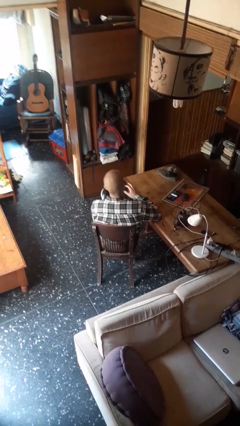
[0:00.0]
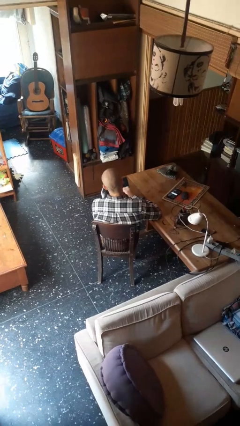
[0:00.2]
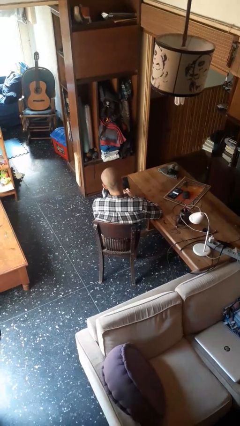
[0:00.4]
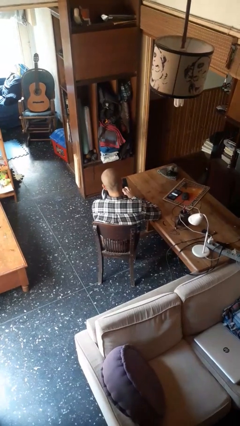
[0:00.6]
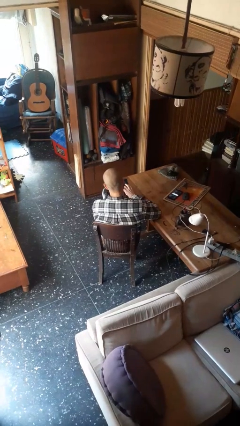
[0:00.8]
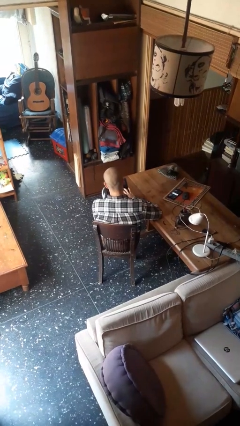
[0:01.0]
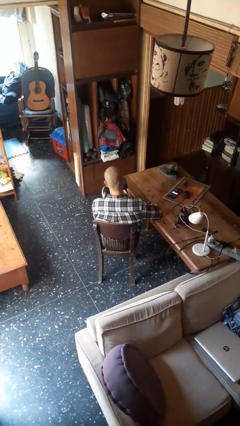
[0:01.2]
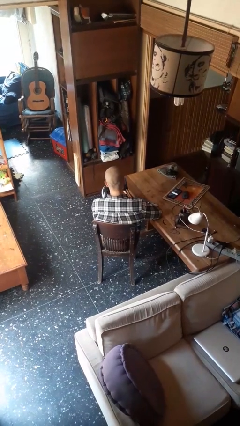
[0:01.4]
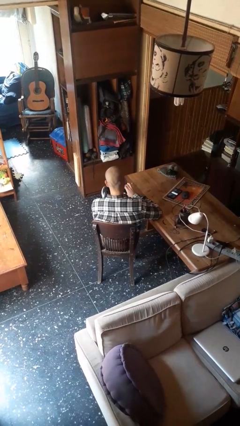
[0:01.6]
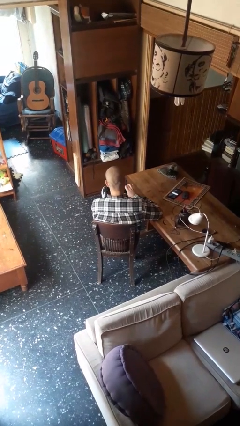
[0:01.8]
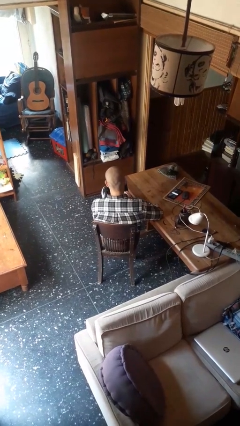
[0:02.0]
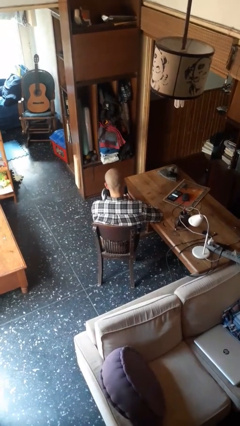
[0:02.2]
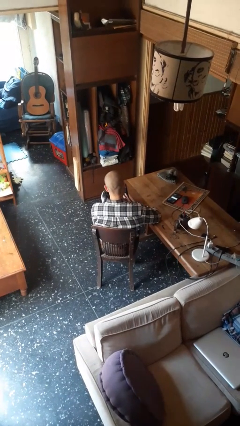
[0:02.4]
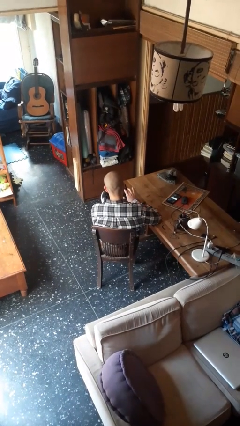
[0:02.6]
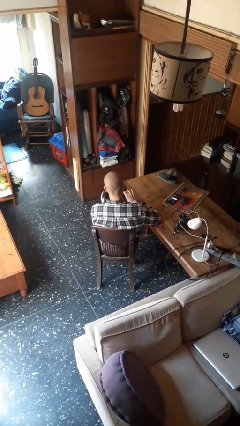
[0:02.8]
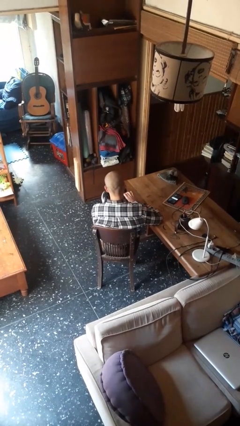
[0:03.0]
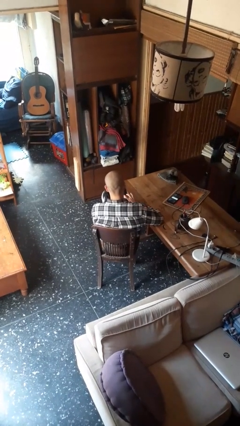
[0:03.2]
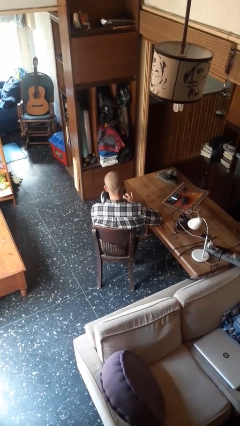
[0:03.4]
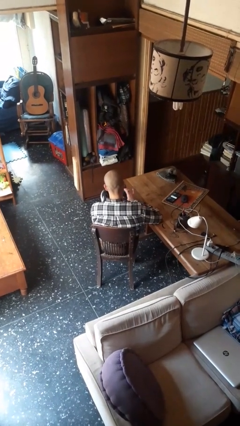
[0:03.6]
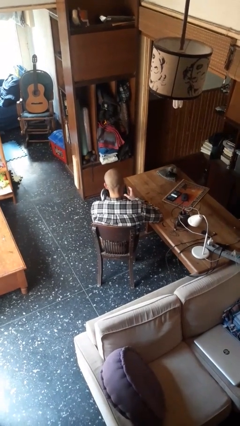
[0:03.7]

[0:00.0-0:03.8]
person interacts with tablet

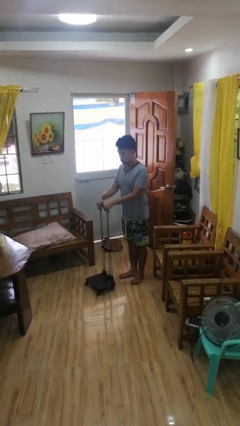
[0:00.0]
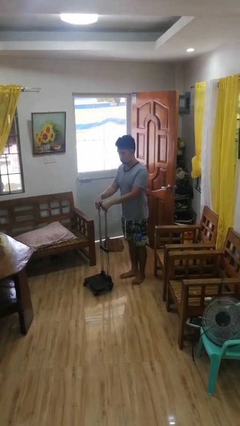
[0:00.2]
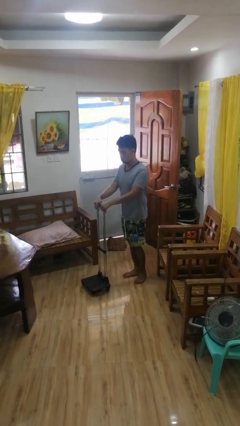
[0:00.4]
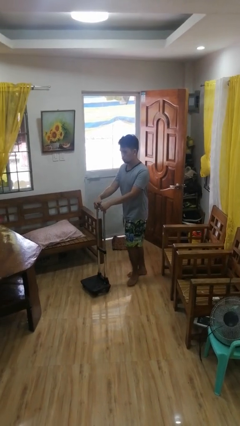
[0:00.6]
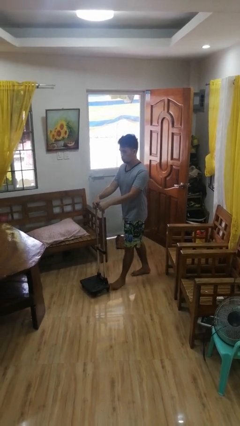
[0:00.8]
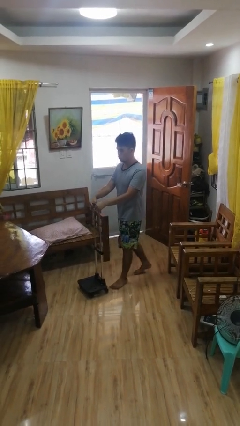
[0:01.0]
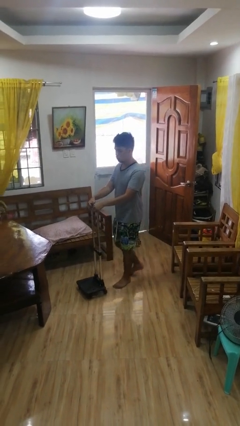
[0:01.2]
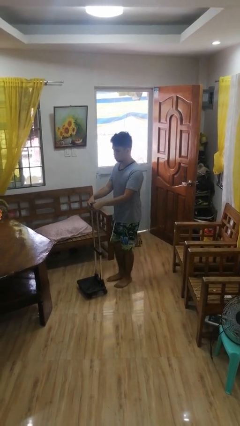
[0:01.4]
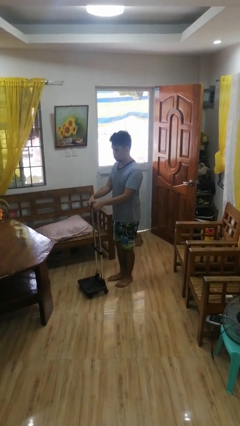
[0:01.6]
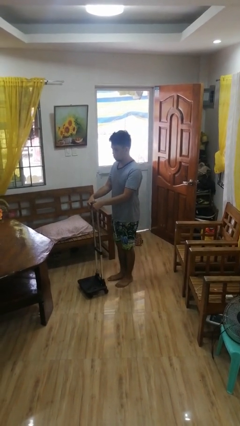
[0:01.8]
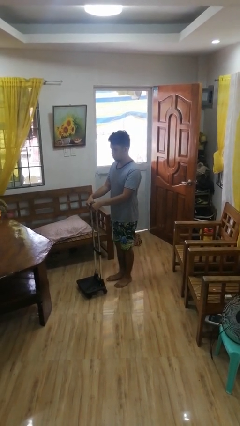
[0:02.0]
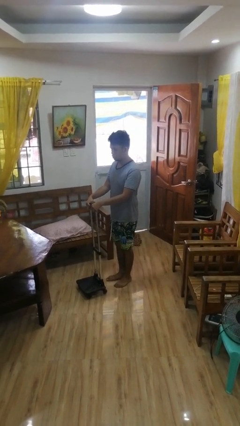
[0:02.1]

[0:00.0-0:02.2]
person pushes wheeled cart

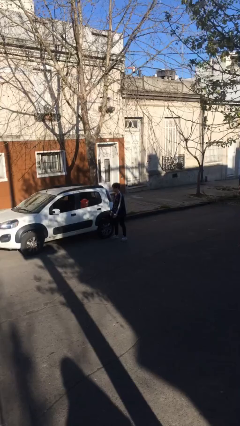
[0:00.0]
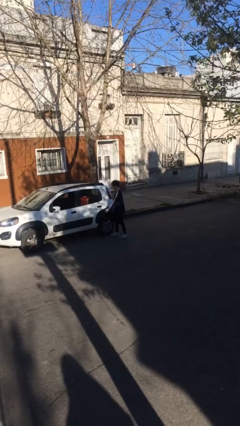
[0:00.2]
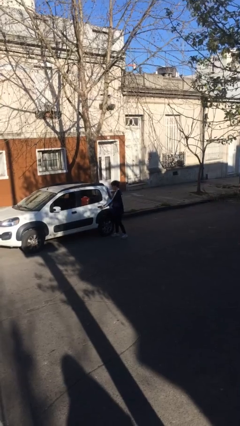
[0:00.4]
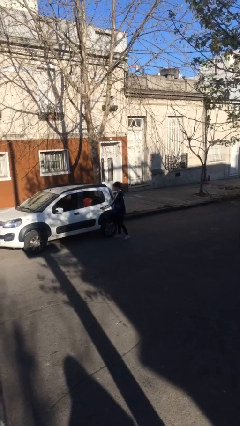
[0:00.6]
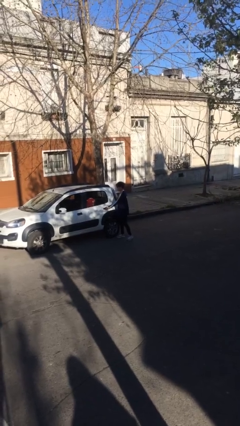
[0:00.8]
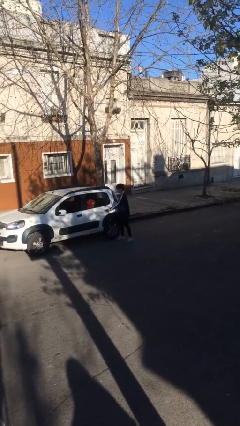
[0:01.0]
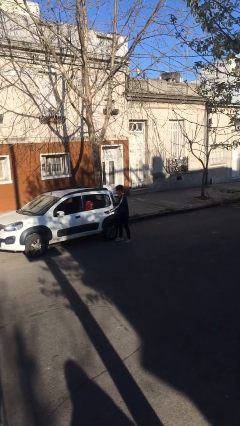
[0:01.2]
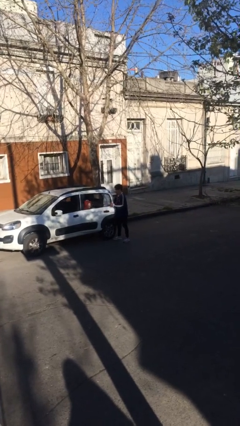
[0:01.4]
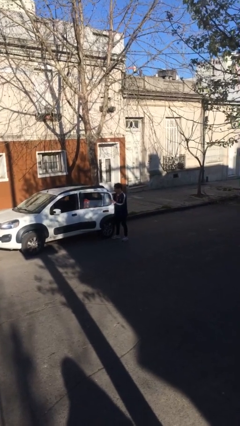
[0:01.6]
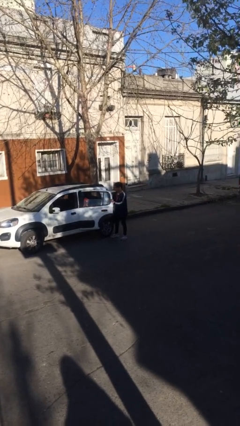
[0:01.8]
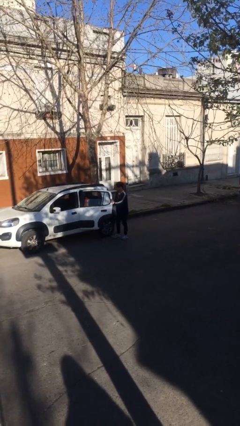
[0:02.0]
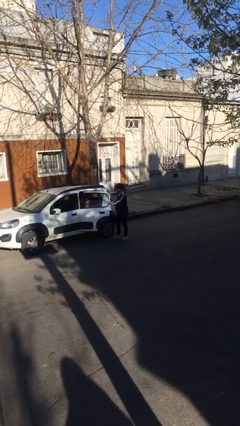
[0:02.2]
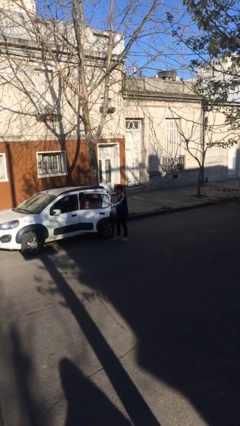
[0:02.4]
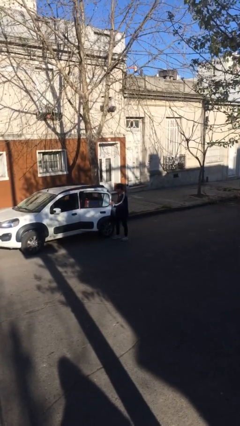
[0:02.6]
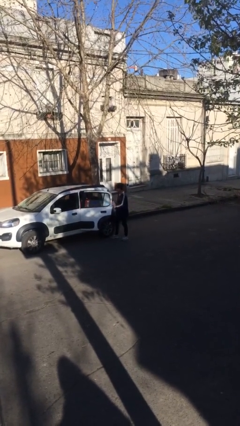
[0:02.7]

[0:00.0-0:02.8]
person opens car door

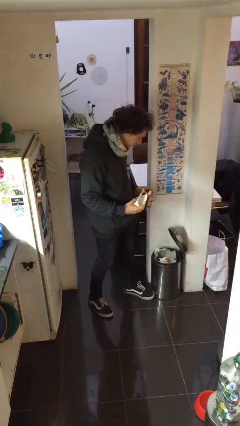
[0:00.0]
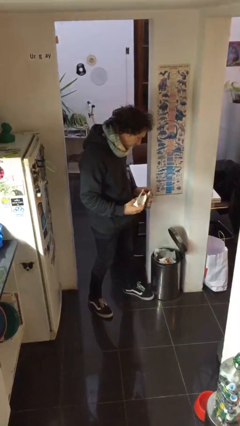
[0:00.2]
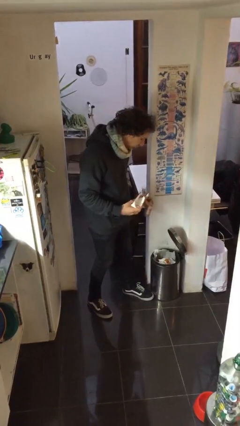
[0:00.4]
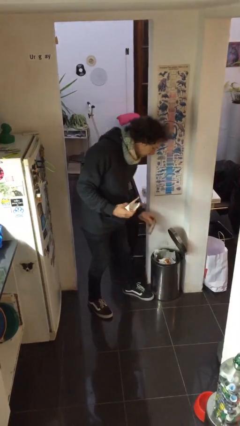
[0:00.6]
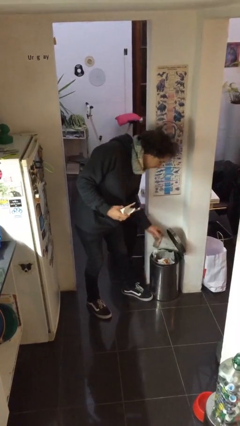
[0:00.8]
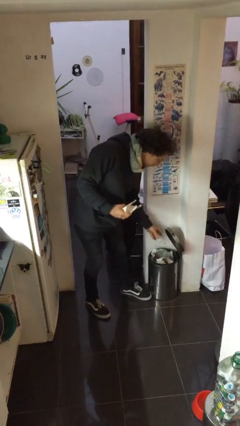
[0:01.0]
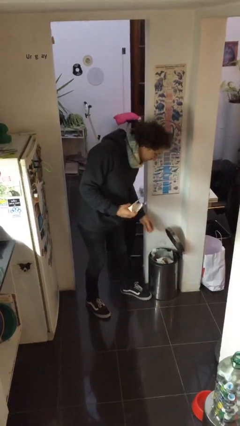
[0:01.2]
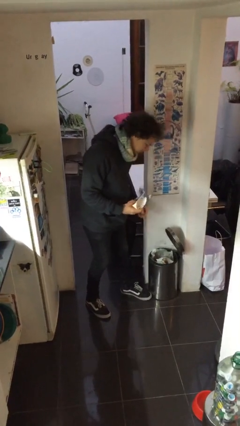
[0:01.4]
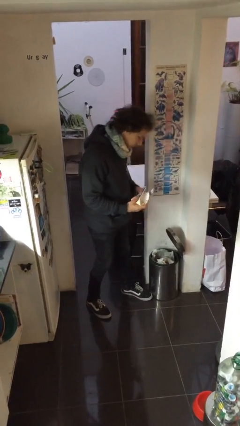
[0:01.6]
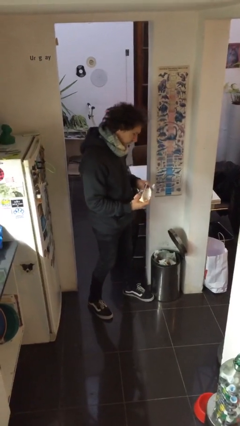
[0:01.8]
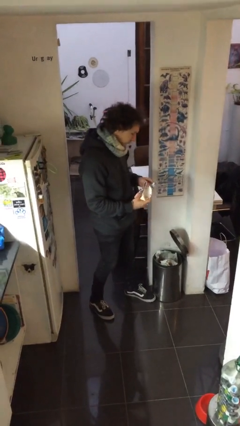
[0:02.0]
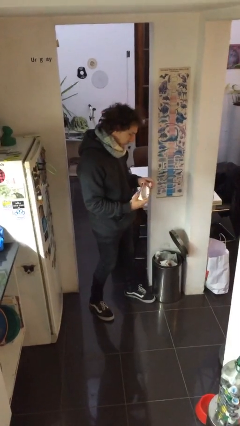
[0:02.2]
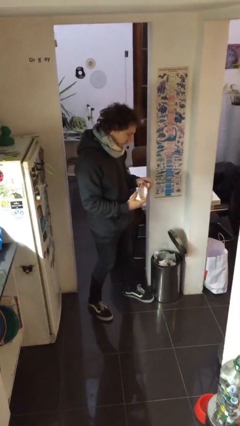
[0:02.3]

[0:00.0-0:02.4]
person discards trash

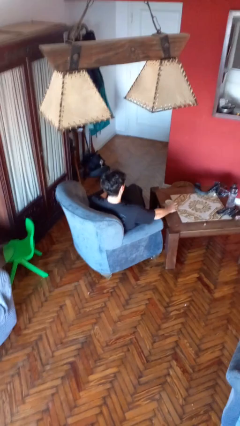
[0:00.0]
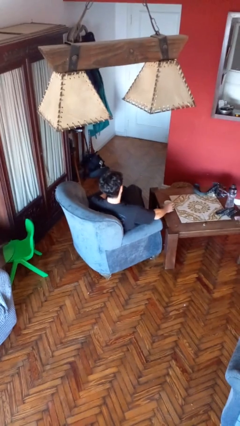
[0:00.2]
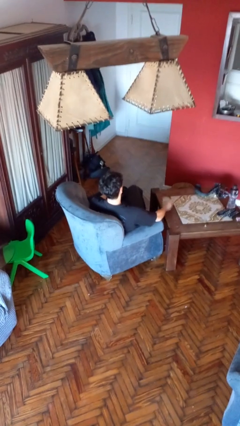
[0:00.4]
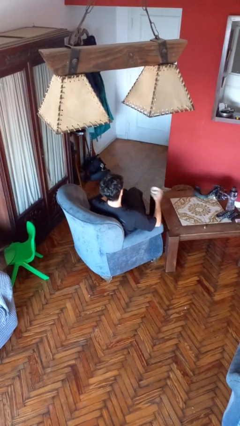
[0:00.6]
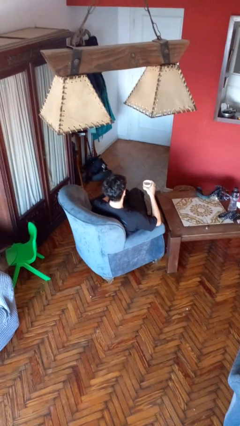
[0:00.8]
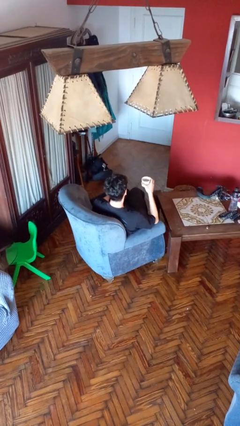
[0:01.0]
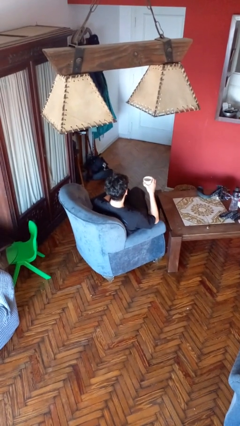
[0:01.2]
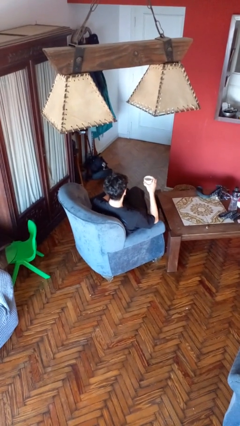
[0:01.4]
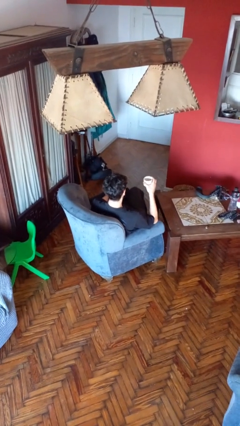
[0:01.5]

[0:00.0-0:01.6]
person picks up object from table

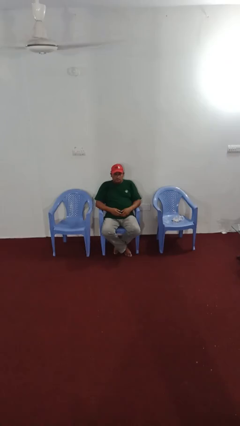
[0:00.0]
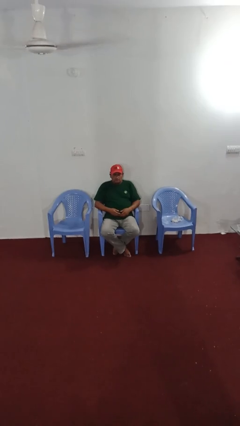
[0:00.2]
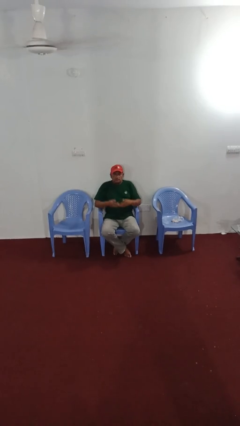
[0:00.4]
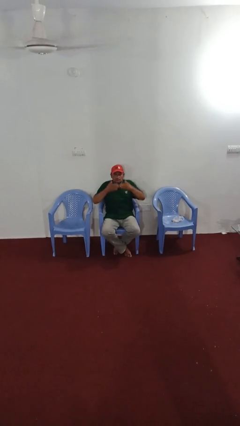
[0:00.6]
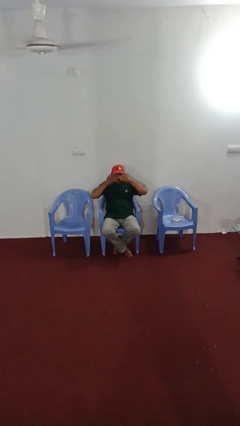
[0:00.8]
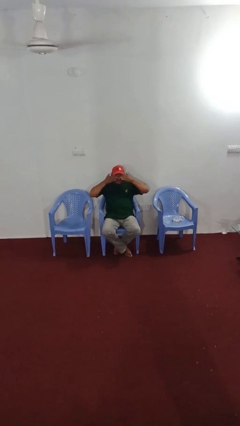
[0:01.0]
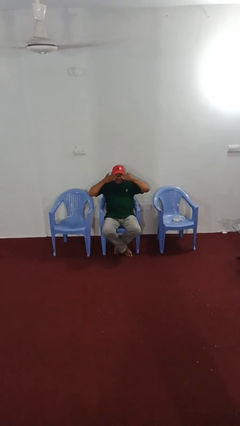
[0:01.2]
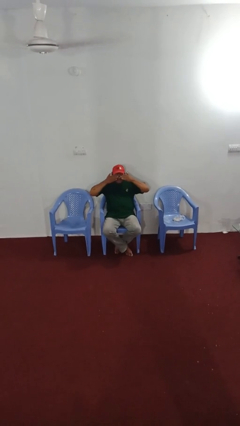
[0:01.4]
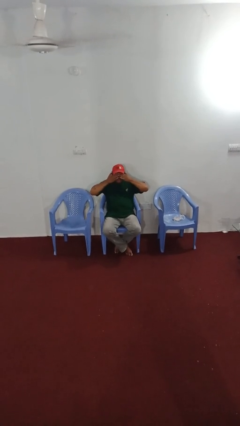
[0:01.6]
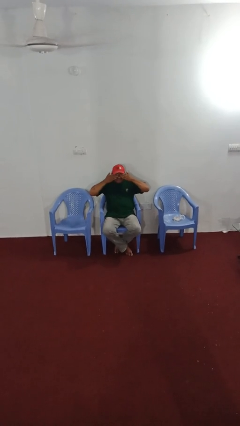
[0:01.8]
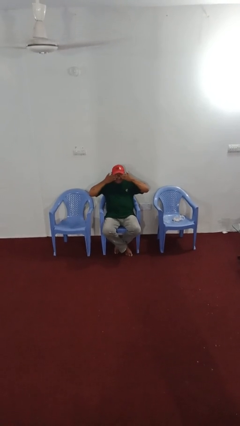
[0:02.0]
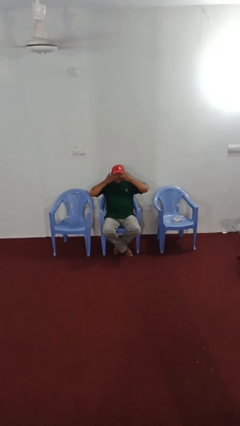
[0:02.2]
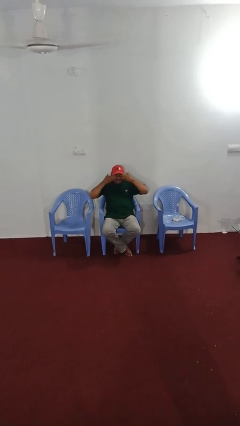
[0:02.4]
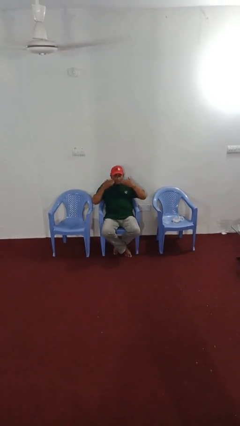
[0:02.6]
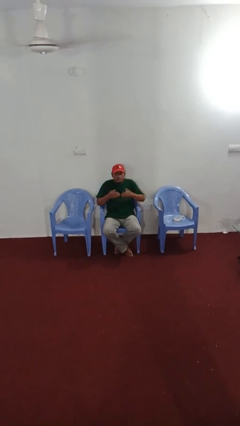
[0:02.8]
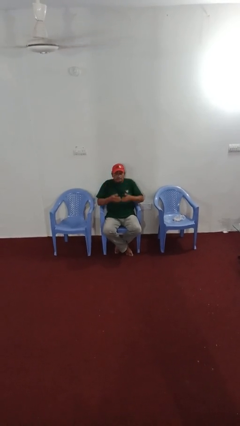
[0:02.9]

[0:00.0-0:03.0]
person rubs eyes

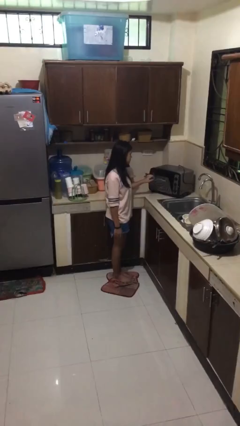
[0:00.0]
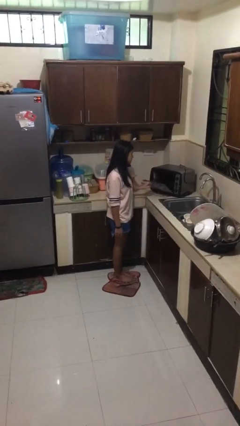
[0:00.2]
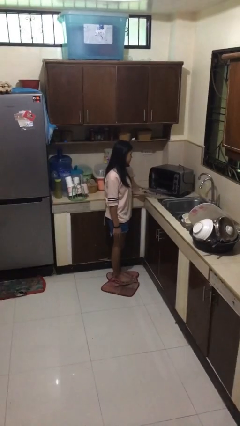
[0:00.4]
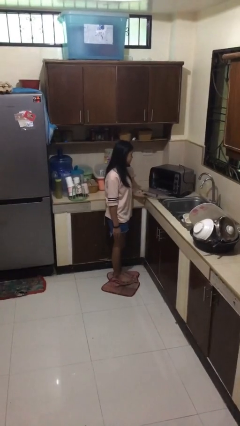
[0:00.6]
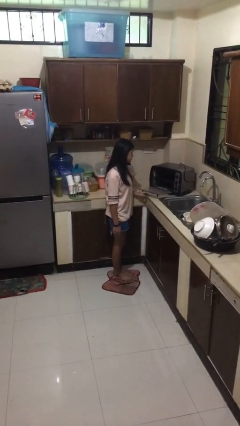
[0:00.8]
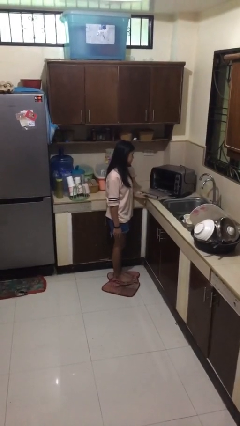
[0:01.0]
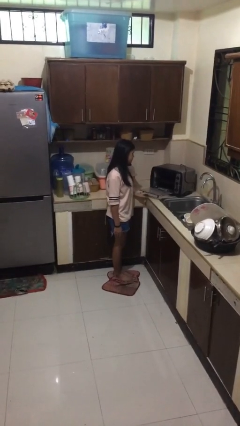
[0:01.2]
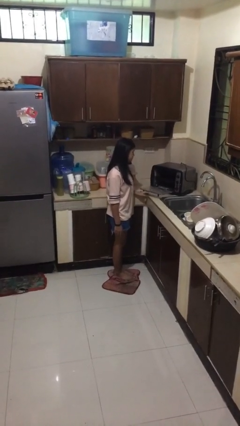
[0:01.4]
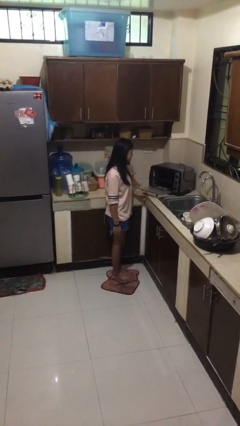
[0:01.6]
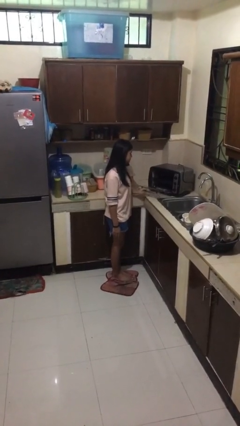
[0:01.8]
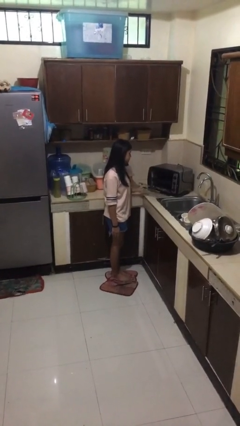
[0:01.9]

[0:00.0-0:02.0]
person opens microwave
